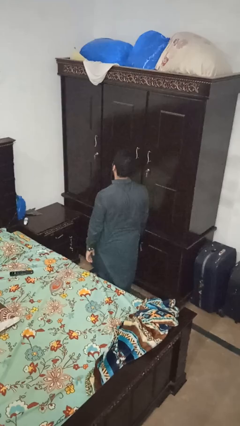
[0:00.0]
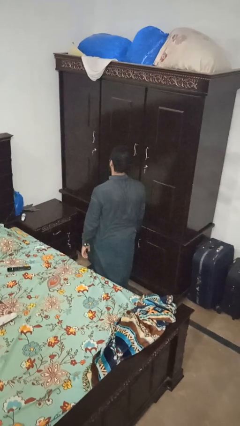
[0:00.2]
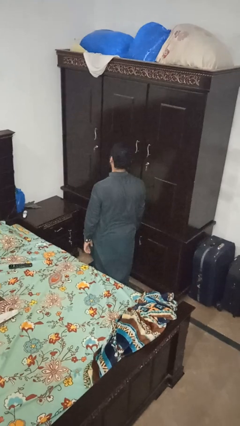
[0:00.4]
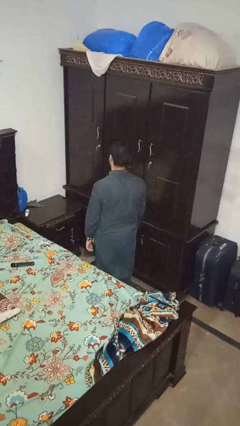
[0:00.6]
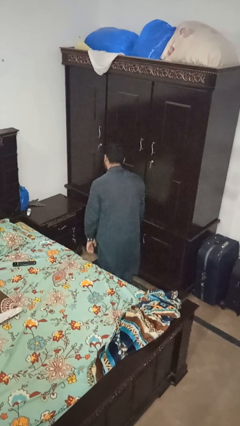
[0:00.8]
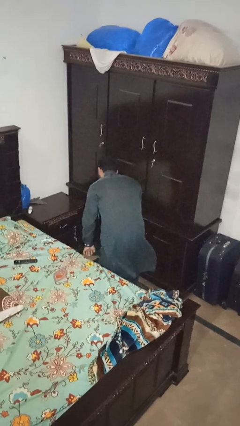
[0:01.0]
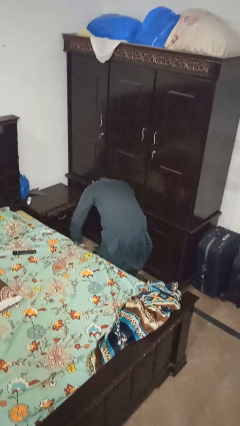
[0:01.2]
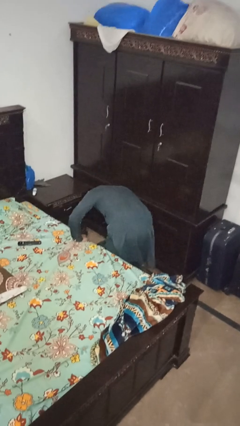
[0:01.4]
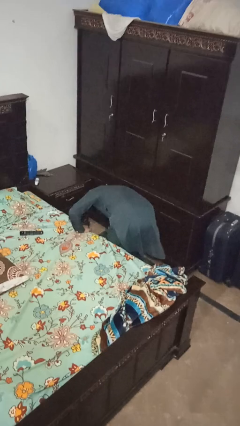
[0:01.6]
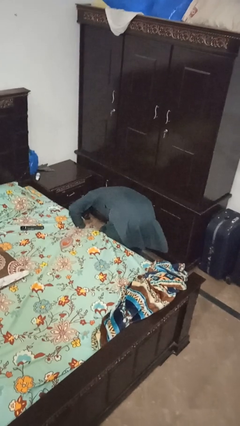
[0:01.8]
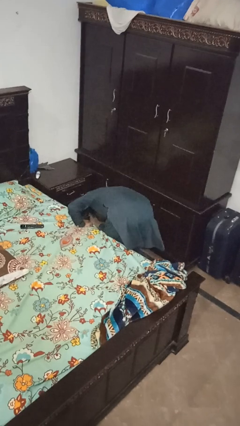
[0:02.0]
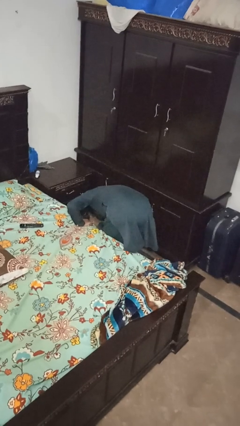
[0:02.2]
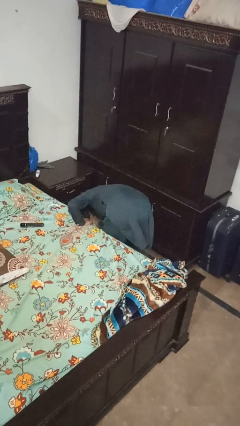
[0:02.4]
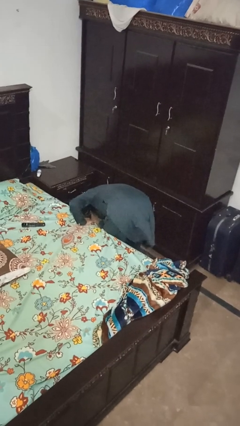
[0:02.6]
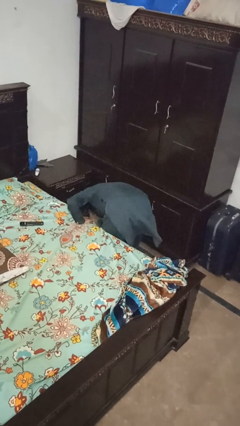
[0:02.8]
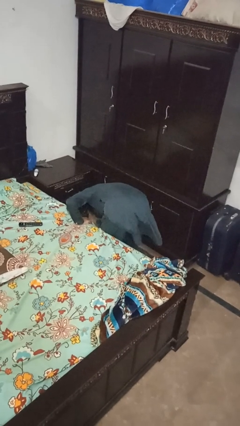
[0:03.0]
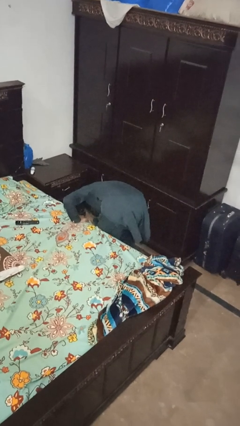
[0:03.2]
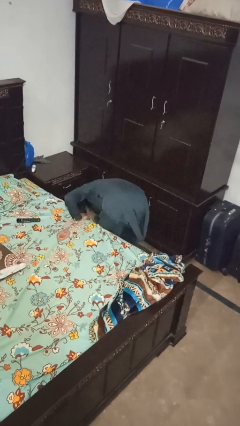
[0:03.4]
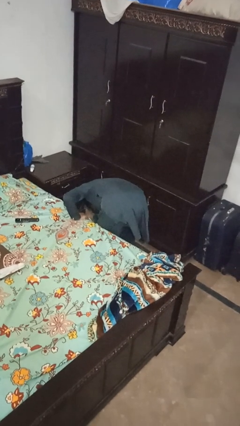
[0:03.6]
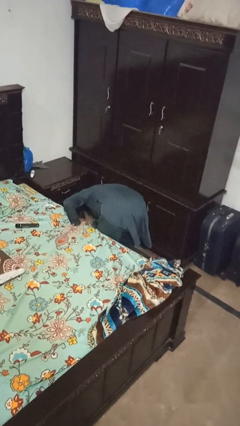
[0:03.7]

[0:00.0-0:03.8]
person searches under bed

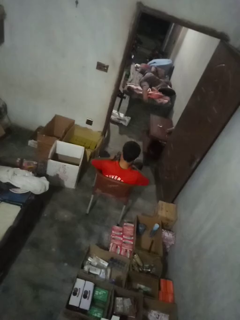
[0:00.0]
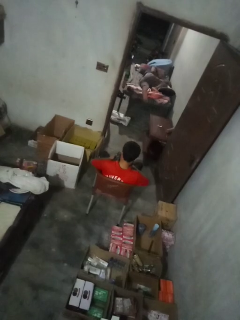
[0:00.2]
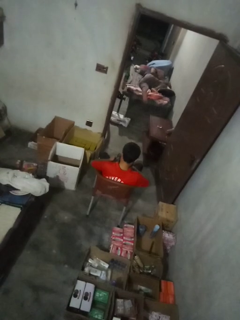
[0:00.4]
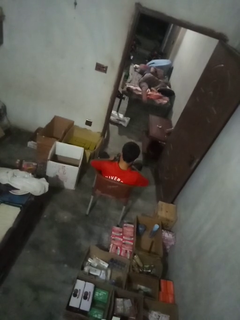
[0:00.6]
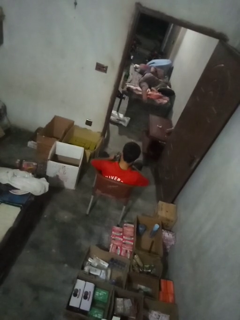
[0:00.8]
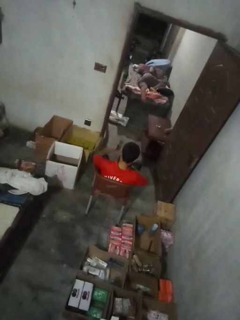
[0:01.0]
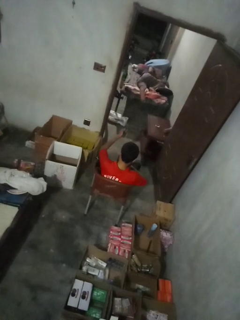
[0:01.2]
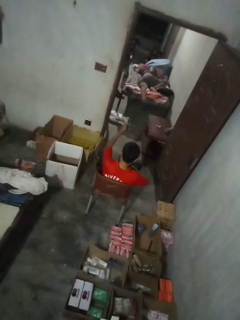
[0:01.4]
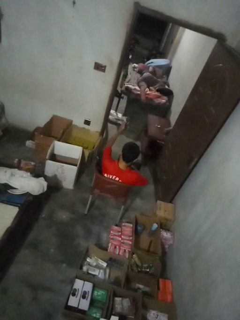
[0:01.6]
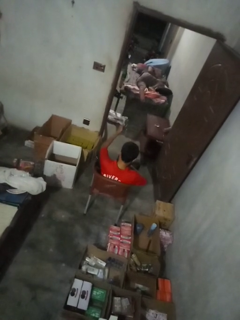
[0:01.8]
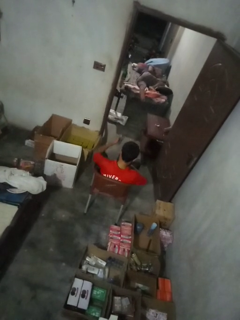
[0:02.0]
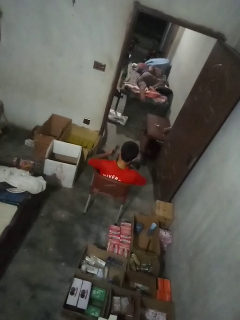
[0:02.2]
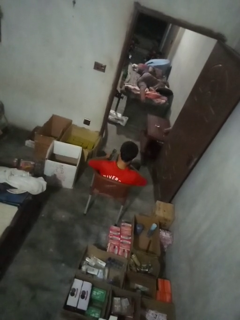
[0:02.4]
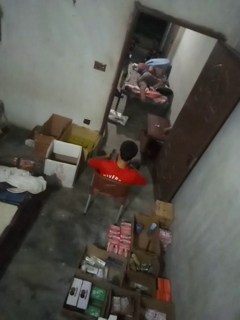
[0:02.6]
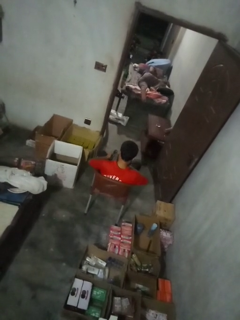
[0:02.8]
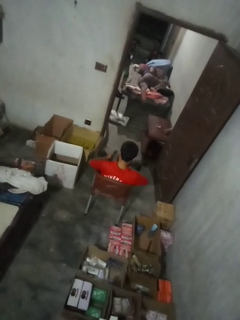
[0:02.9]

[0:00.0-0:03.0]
person uses television remote

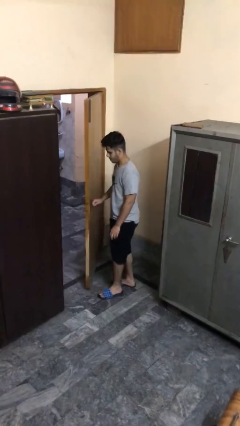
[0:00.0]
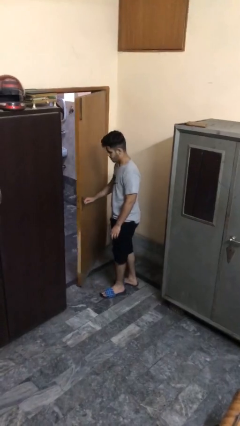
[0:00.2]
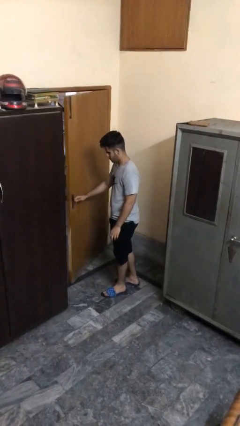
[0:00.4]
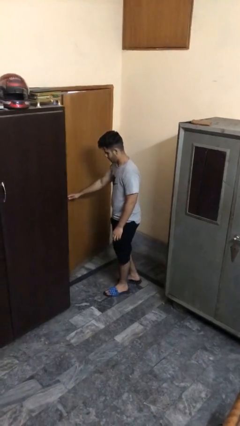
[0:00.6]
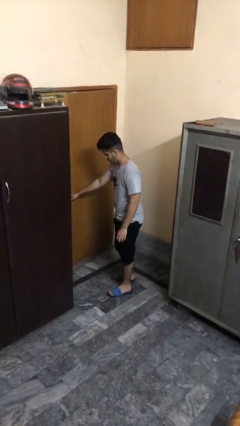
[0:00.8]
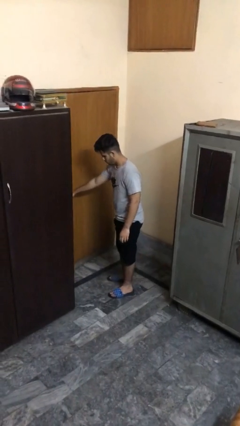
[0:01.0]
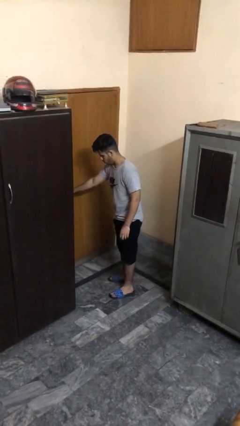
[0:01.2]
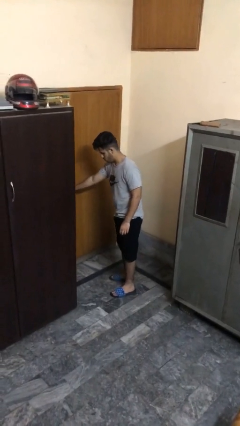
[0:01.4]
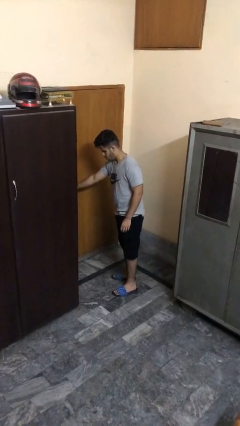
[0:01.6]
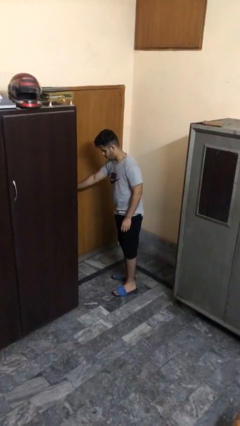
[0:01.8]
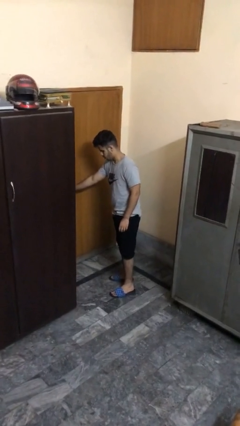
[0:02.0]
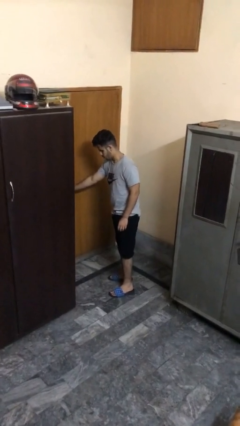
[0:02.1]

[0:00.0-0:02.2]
person closes facility door

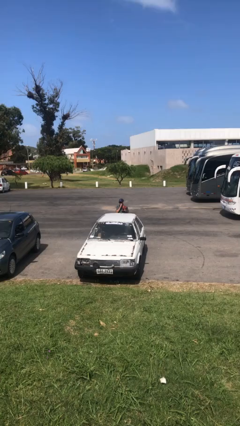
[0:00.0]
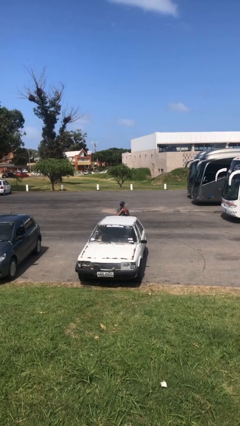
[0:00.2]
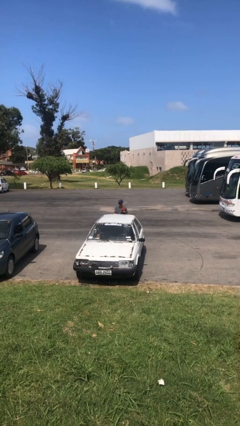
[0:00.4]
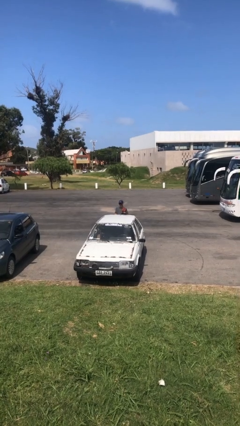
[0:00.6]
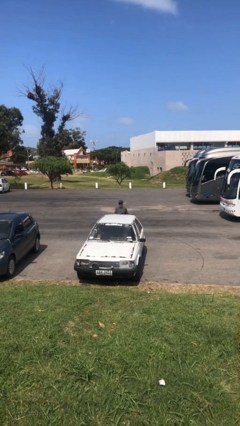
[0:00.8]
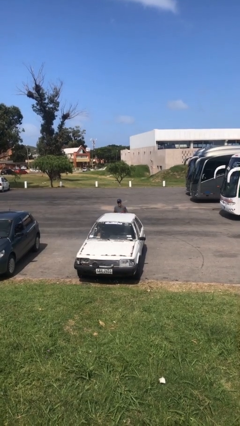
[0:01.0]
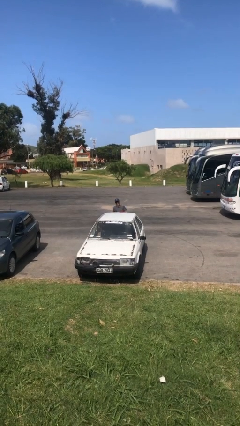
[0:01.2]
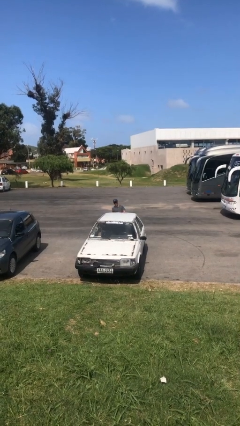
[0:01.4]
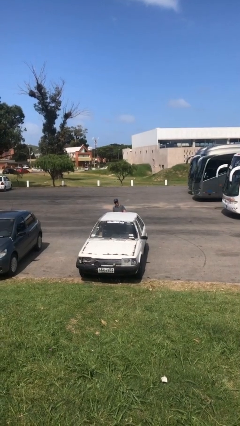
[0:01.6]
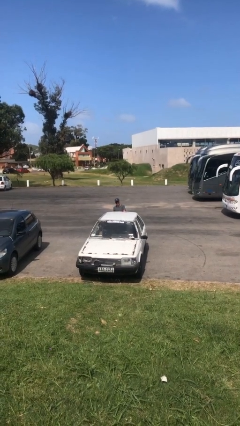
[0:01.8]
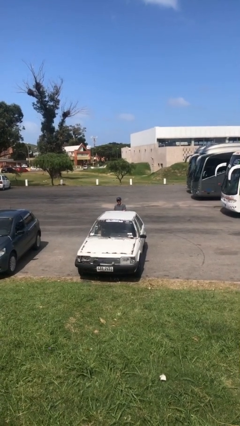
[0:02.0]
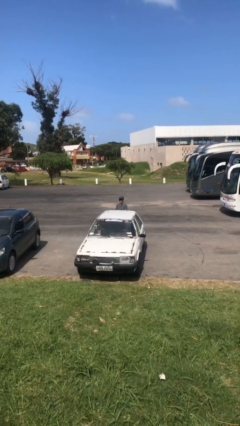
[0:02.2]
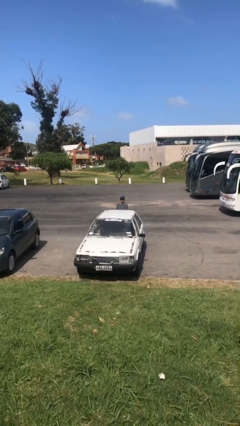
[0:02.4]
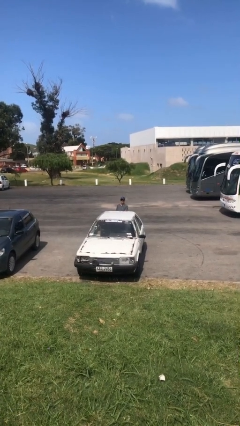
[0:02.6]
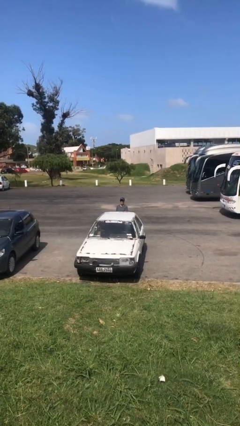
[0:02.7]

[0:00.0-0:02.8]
person loads car

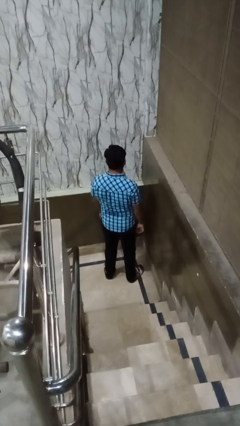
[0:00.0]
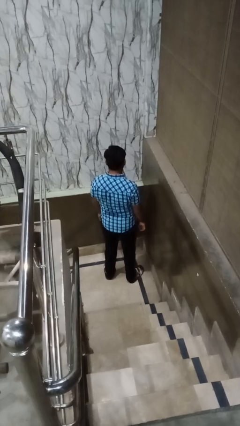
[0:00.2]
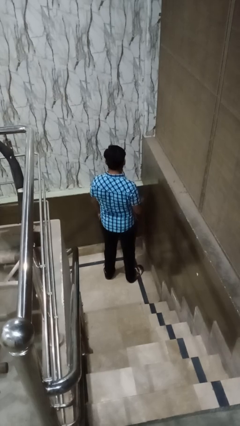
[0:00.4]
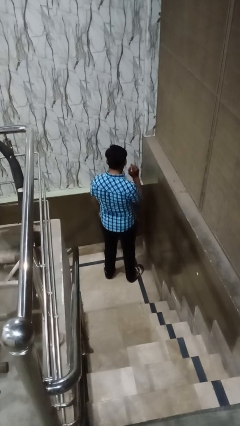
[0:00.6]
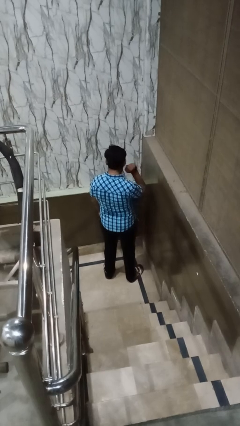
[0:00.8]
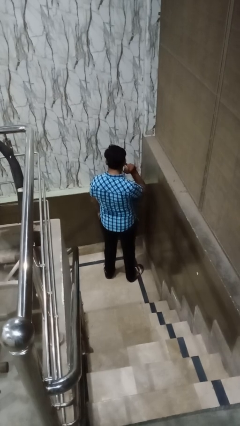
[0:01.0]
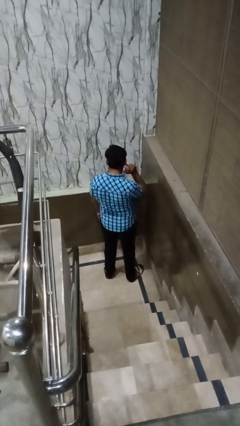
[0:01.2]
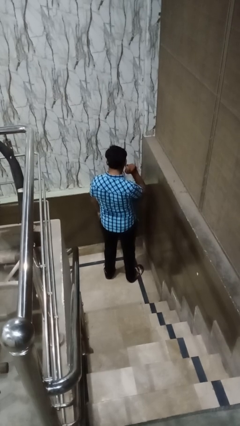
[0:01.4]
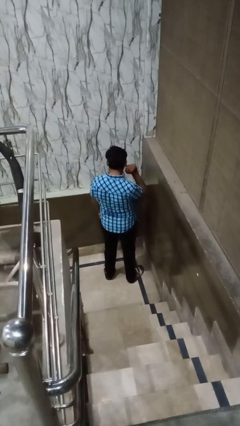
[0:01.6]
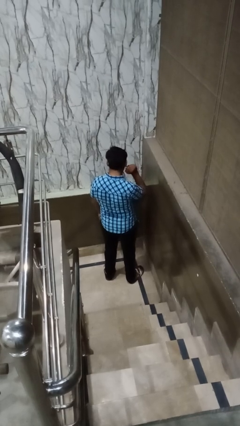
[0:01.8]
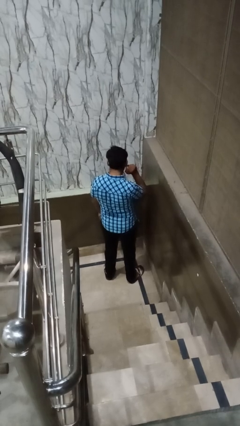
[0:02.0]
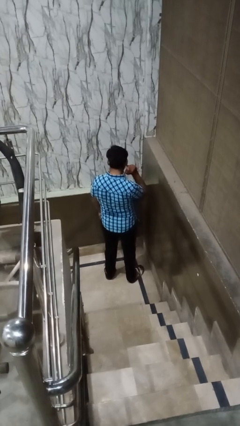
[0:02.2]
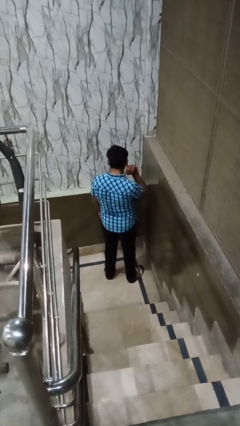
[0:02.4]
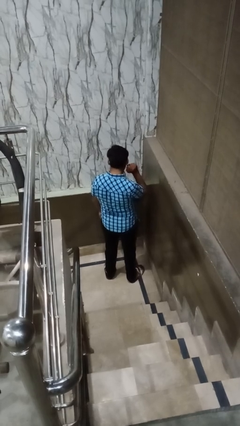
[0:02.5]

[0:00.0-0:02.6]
person touches earlobe

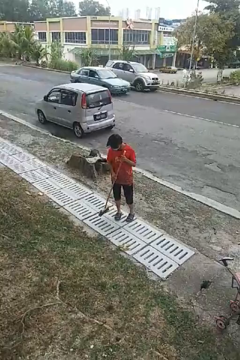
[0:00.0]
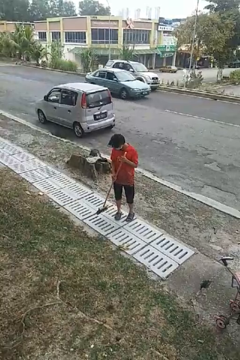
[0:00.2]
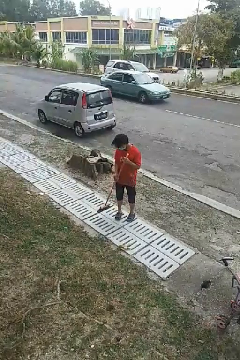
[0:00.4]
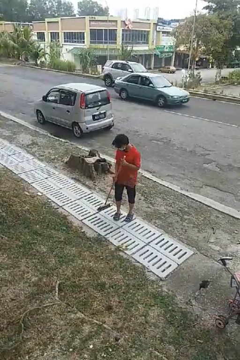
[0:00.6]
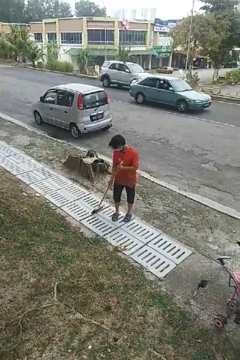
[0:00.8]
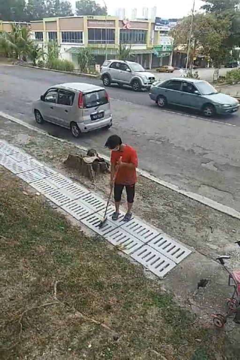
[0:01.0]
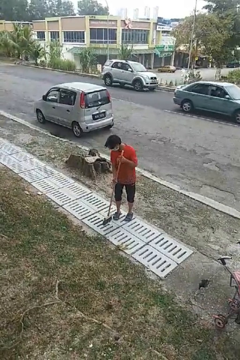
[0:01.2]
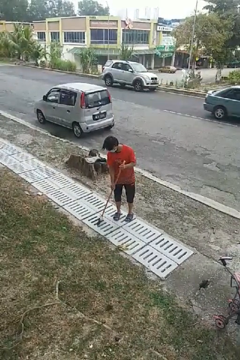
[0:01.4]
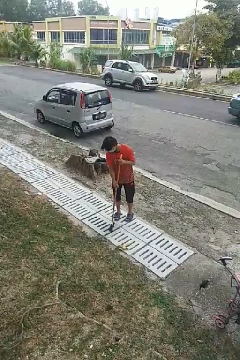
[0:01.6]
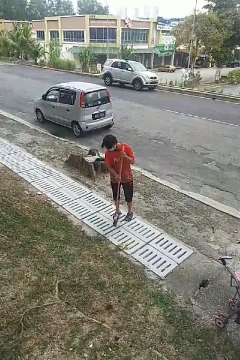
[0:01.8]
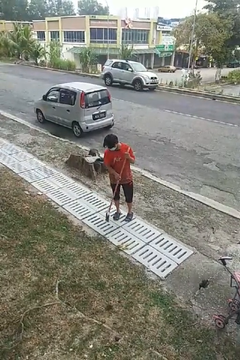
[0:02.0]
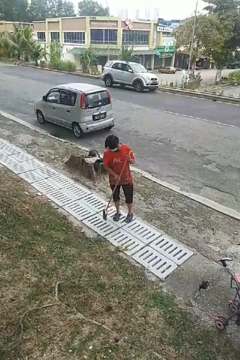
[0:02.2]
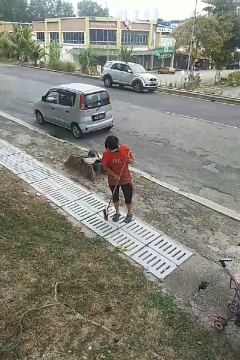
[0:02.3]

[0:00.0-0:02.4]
person sweeps floor

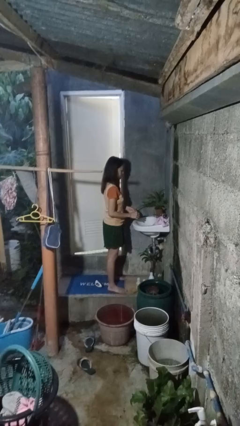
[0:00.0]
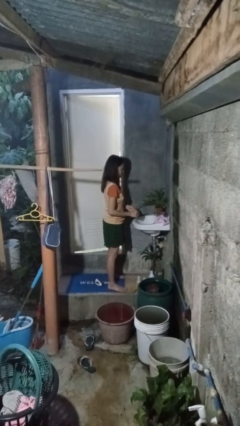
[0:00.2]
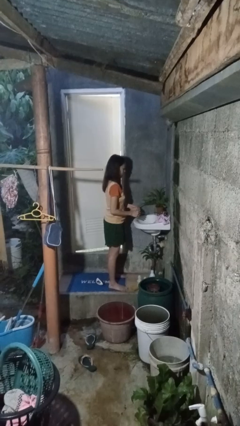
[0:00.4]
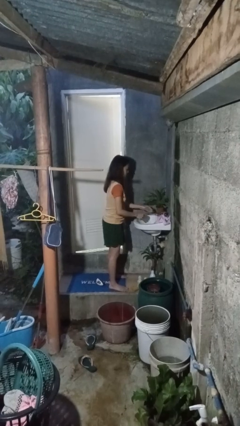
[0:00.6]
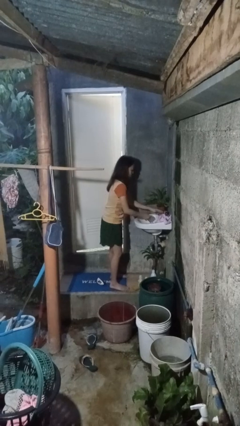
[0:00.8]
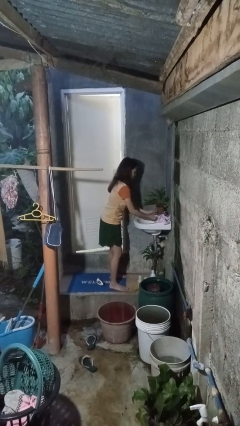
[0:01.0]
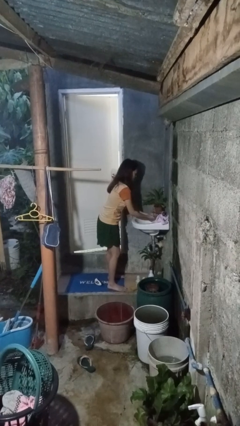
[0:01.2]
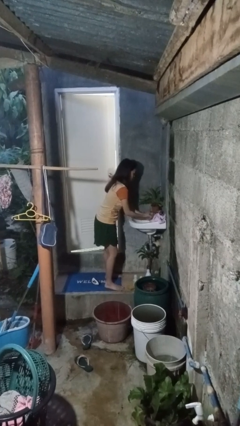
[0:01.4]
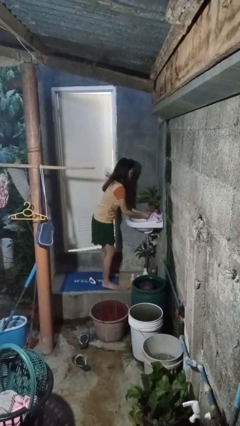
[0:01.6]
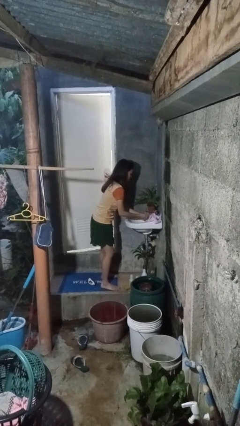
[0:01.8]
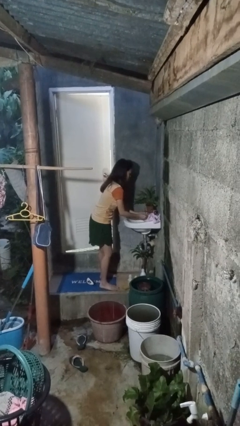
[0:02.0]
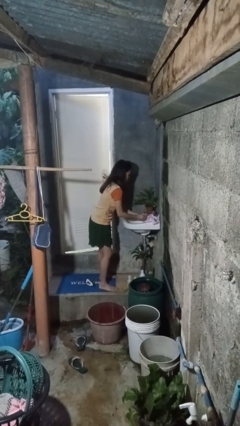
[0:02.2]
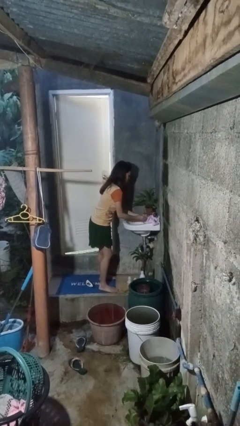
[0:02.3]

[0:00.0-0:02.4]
person washes hands
